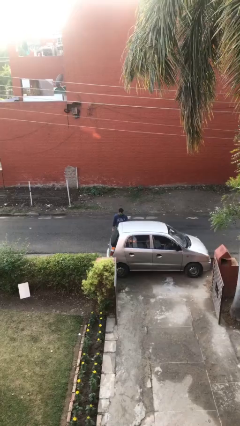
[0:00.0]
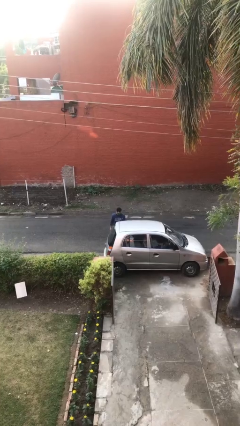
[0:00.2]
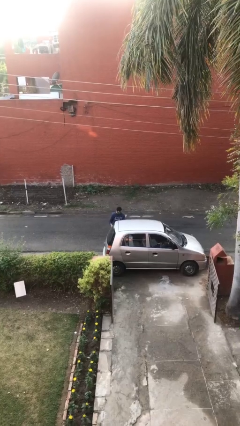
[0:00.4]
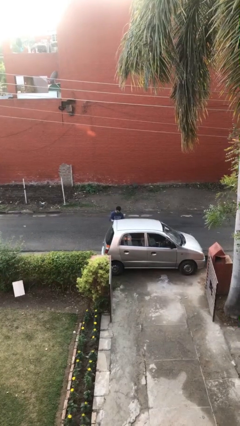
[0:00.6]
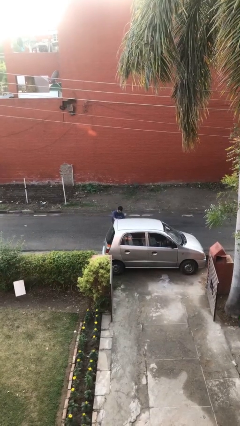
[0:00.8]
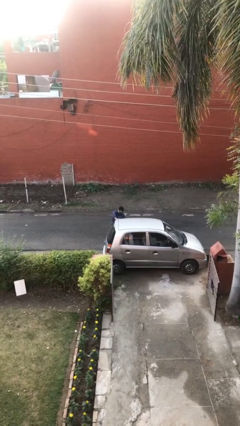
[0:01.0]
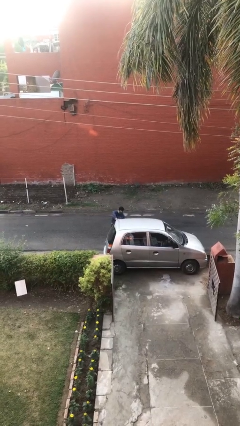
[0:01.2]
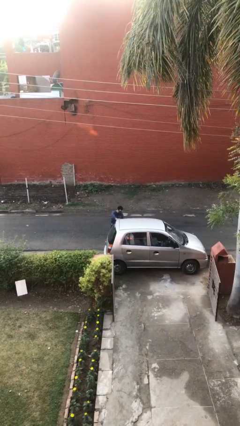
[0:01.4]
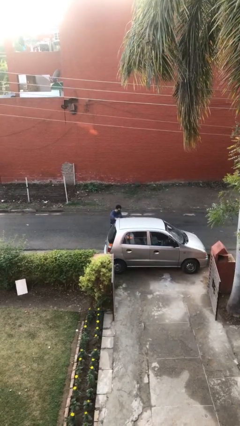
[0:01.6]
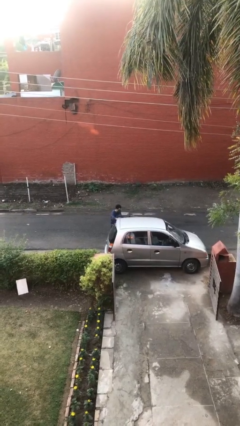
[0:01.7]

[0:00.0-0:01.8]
person opens car door

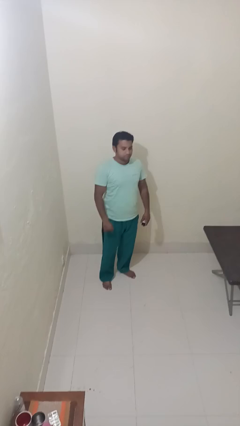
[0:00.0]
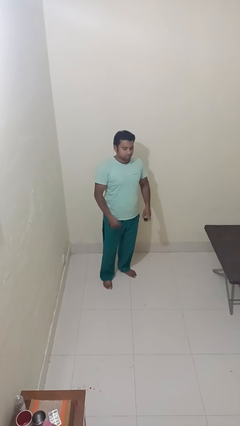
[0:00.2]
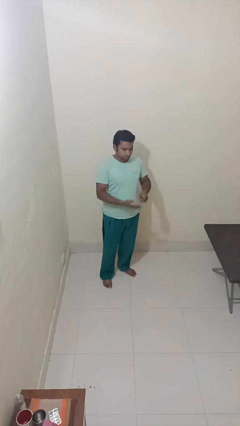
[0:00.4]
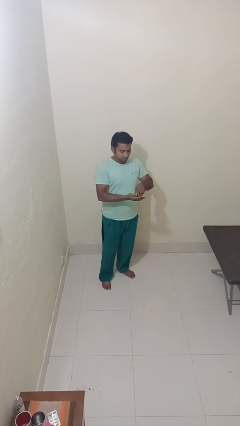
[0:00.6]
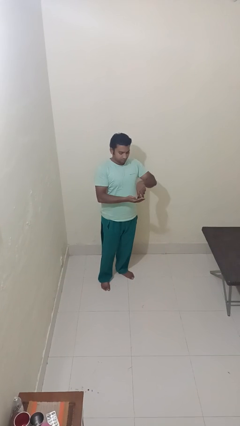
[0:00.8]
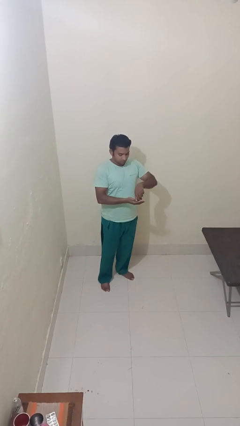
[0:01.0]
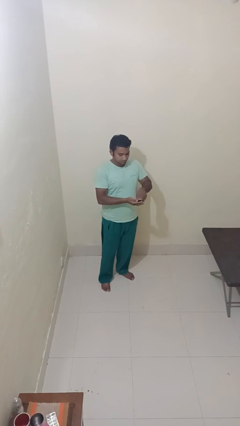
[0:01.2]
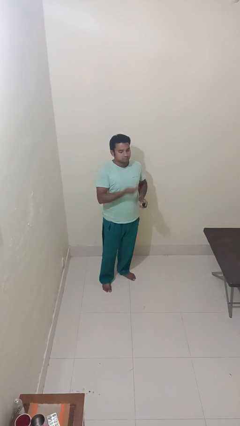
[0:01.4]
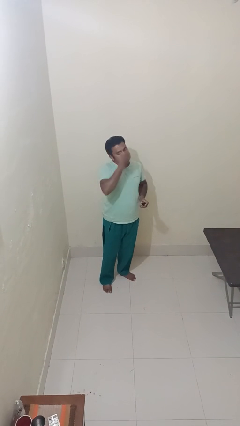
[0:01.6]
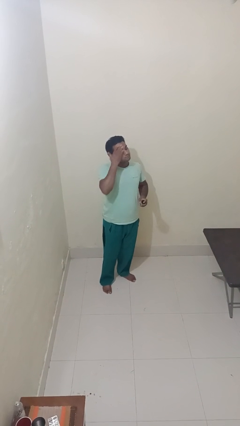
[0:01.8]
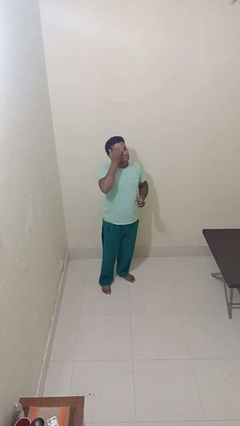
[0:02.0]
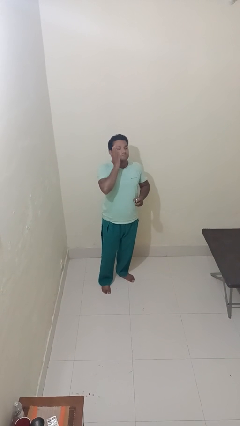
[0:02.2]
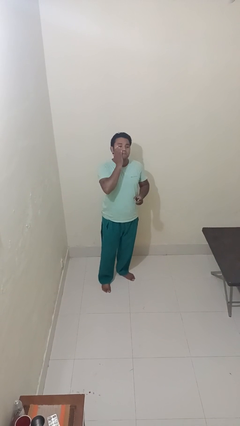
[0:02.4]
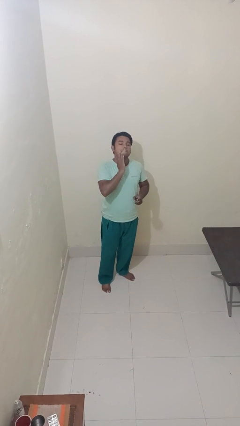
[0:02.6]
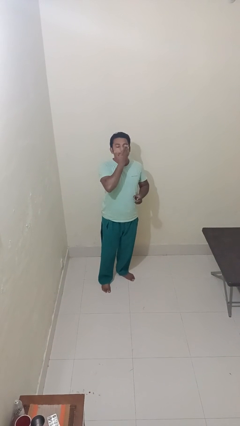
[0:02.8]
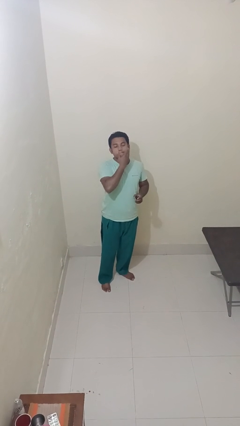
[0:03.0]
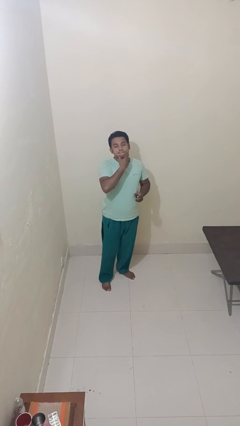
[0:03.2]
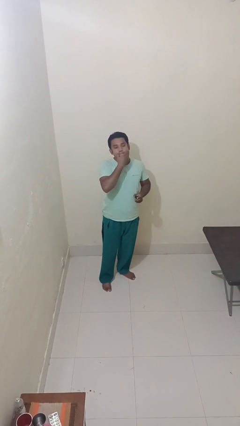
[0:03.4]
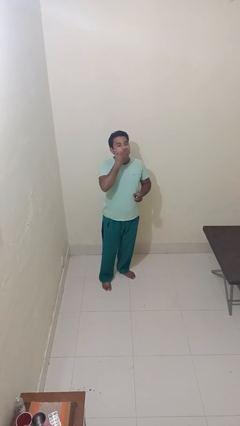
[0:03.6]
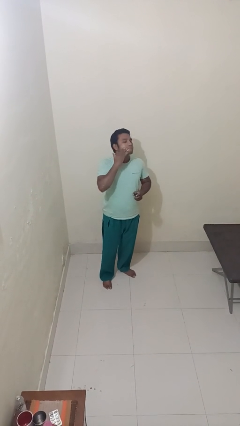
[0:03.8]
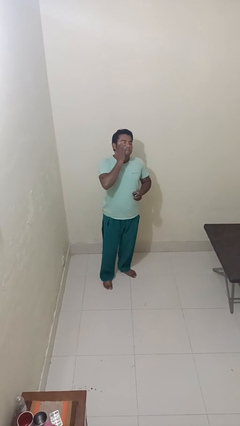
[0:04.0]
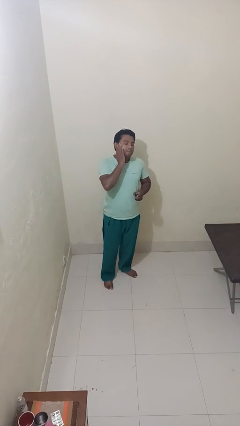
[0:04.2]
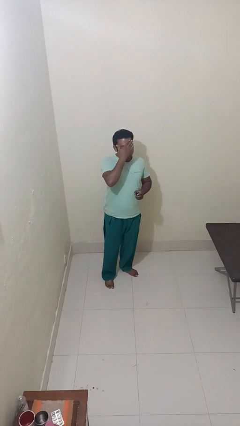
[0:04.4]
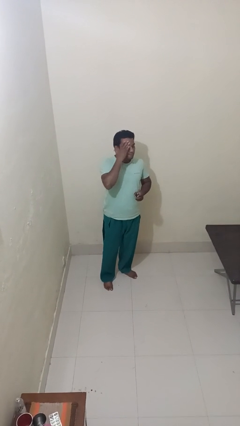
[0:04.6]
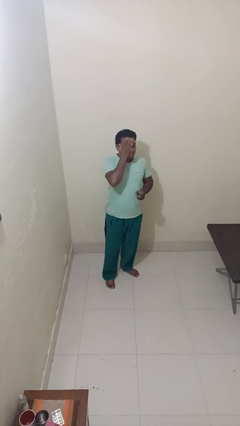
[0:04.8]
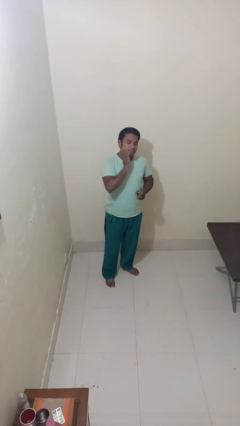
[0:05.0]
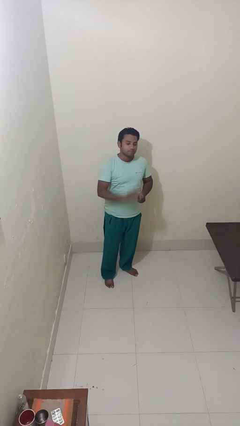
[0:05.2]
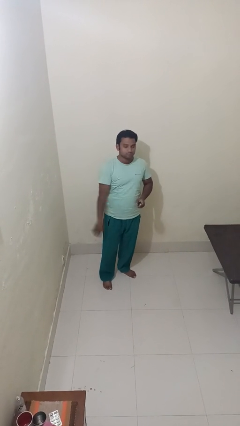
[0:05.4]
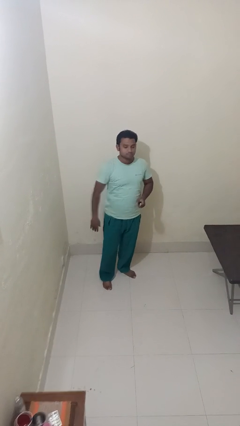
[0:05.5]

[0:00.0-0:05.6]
person applies facial moisturizer

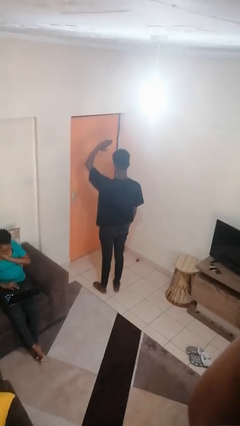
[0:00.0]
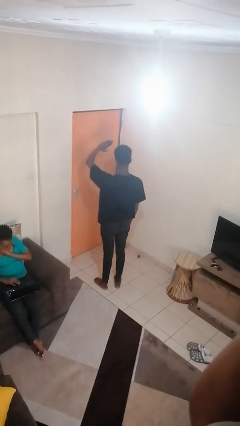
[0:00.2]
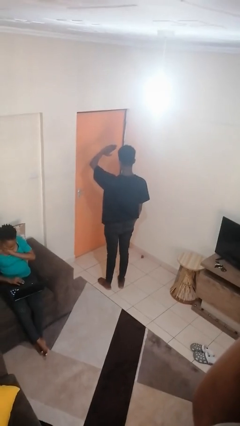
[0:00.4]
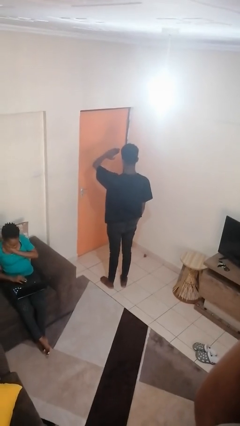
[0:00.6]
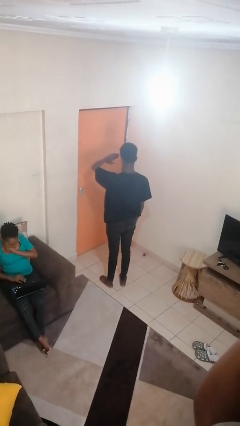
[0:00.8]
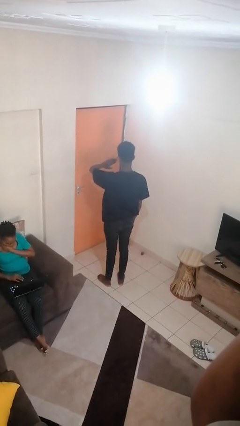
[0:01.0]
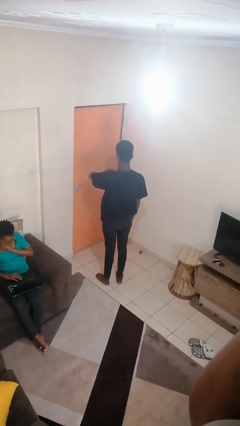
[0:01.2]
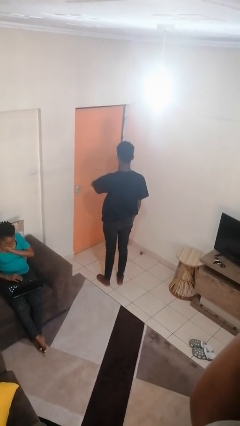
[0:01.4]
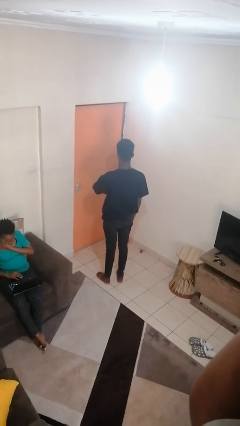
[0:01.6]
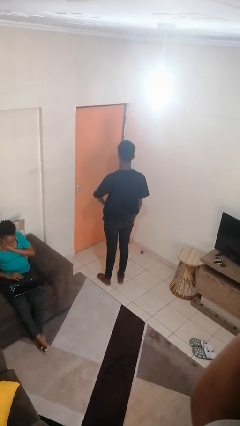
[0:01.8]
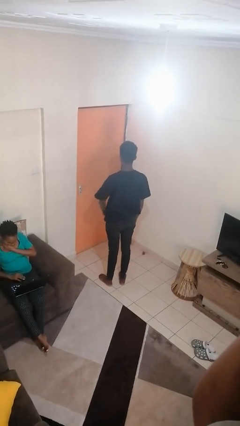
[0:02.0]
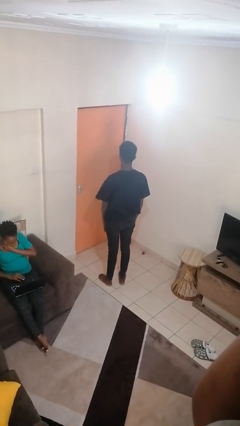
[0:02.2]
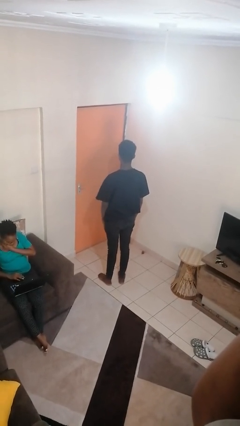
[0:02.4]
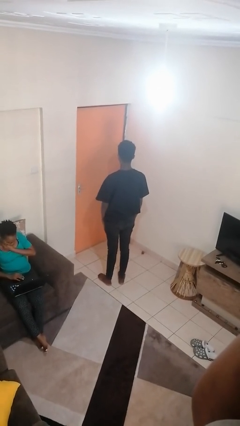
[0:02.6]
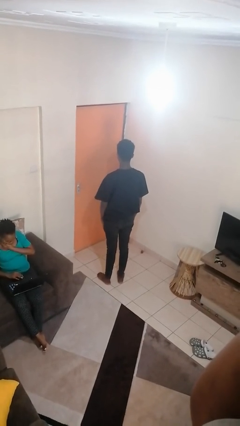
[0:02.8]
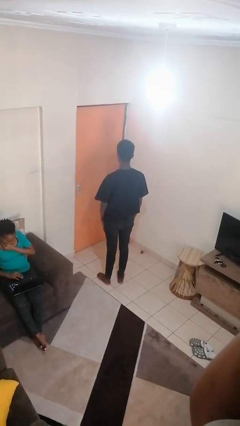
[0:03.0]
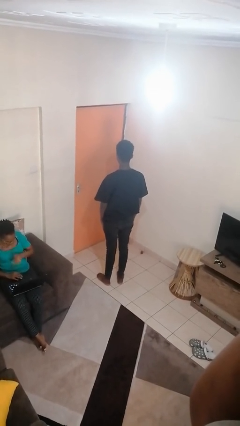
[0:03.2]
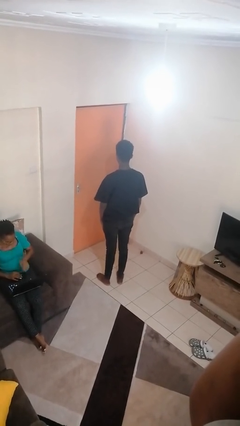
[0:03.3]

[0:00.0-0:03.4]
person gestures swipe down

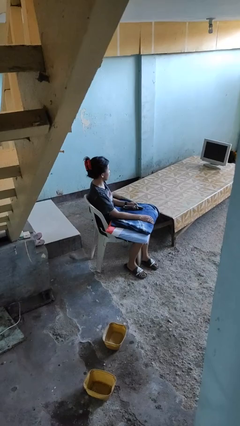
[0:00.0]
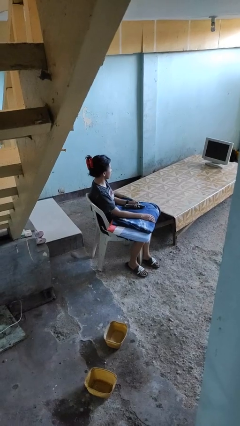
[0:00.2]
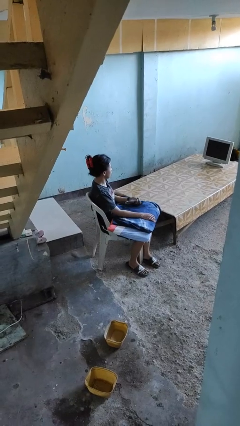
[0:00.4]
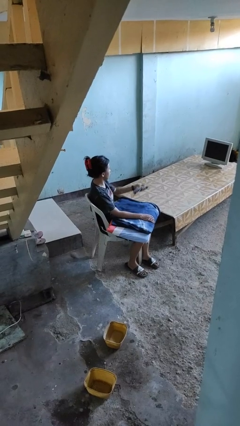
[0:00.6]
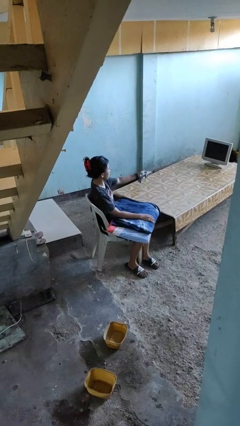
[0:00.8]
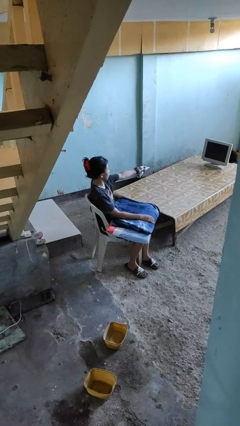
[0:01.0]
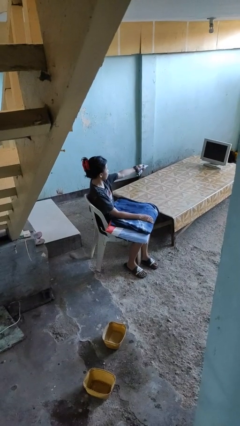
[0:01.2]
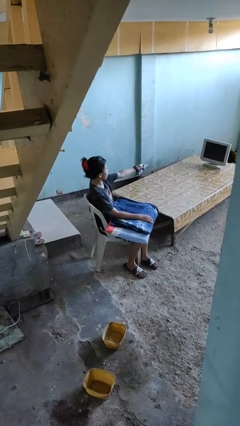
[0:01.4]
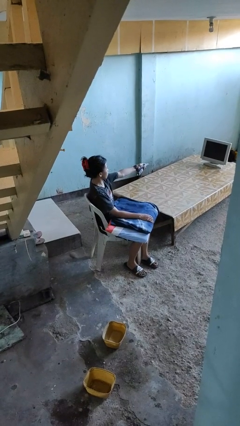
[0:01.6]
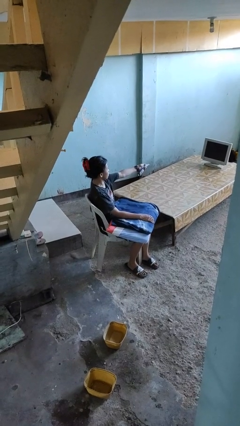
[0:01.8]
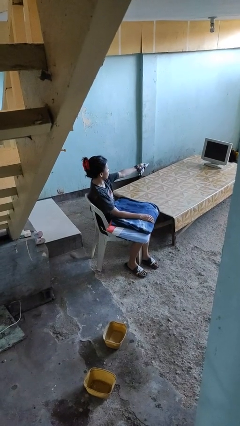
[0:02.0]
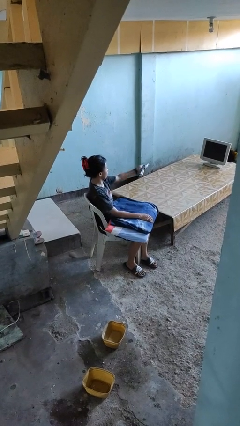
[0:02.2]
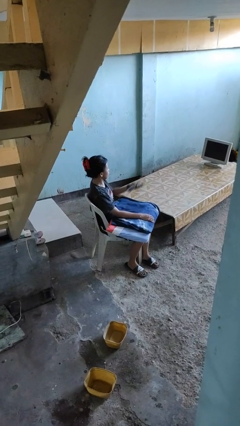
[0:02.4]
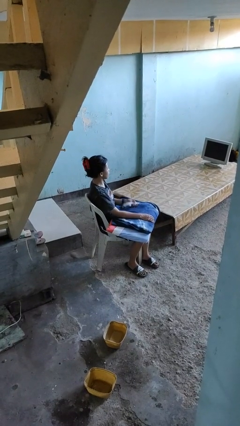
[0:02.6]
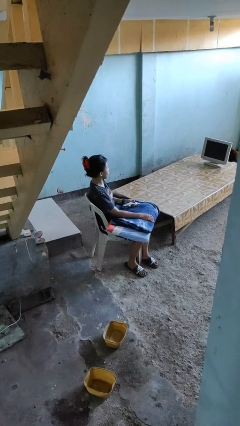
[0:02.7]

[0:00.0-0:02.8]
person uses television remote

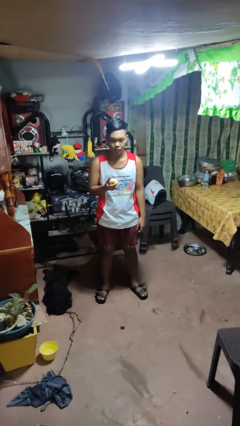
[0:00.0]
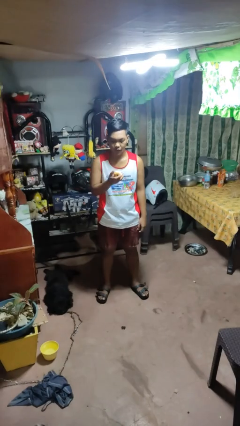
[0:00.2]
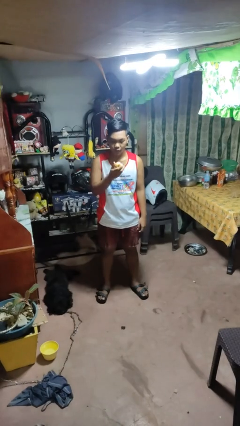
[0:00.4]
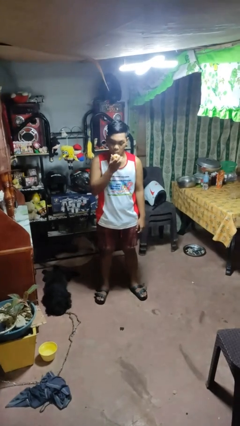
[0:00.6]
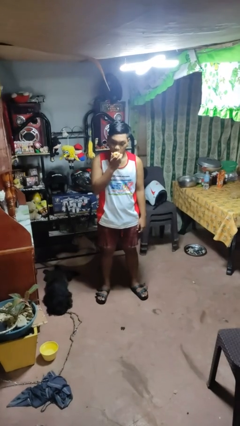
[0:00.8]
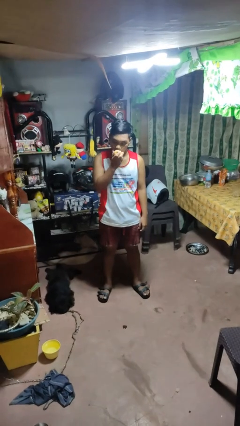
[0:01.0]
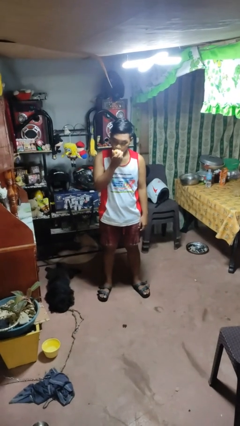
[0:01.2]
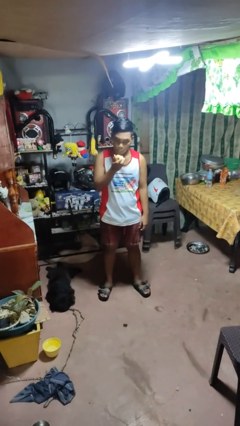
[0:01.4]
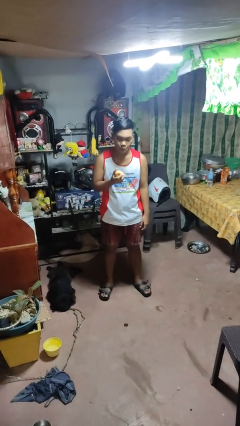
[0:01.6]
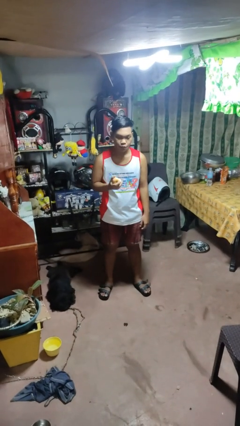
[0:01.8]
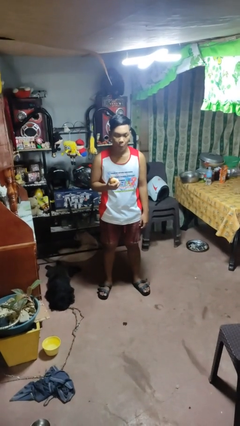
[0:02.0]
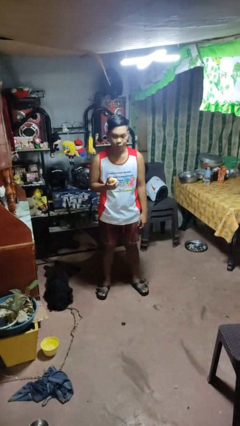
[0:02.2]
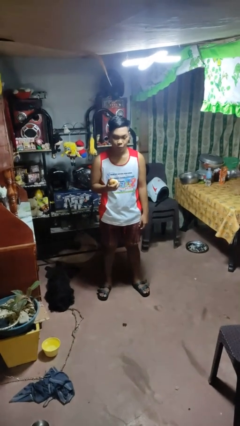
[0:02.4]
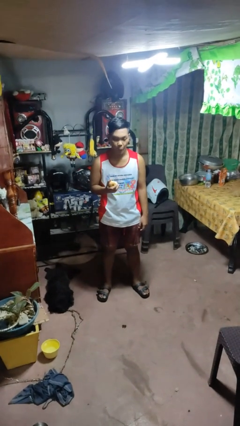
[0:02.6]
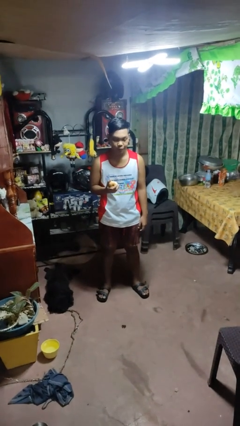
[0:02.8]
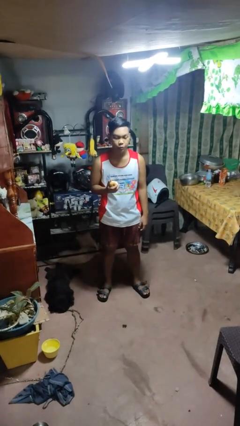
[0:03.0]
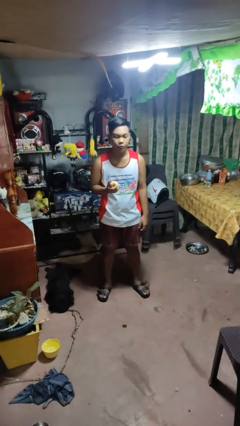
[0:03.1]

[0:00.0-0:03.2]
person eats apple

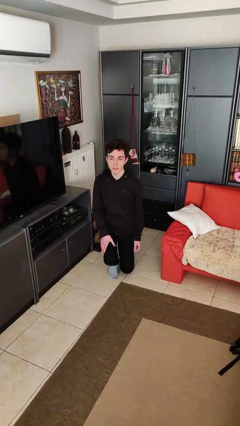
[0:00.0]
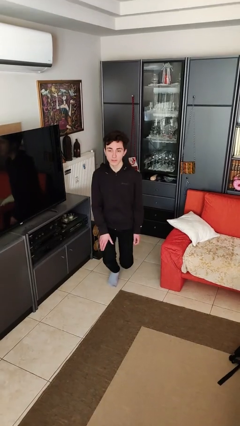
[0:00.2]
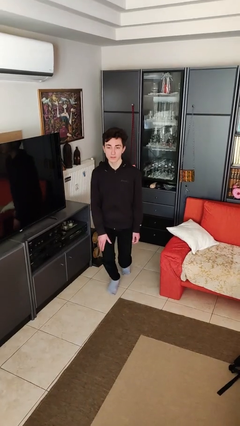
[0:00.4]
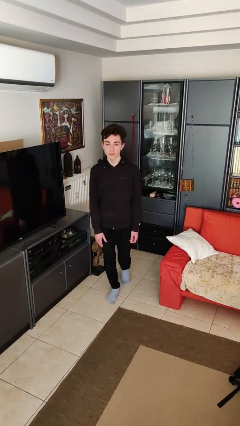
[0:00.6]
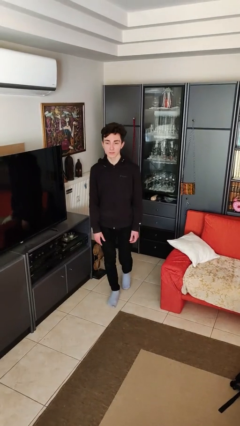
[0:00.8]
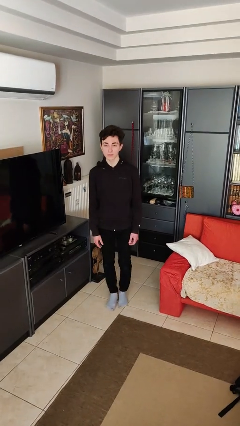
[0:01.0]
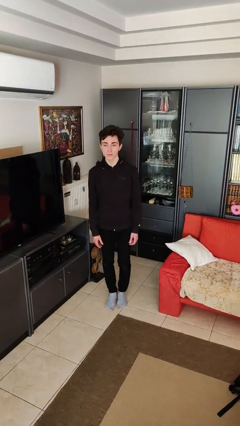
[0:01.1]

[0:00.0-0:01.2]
person stands up from floor
